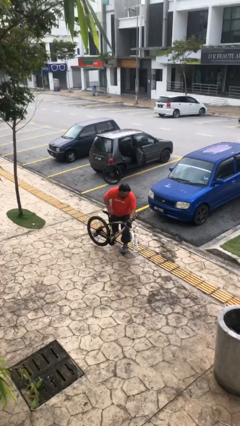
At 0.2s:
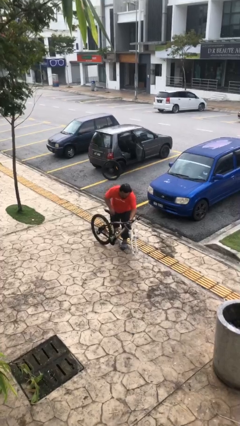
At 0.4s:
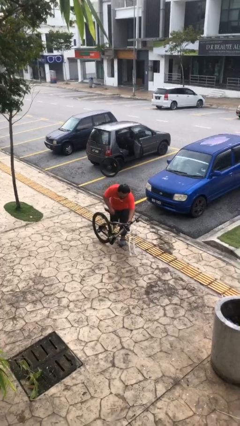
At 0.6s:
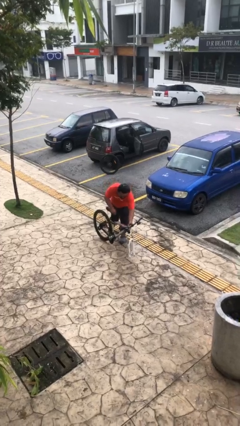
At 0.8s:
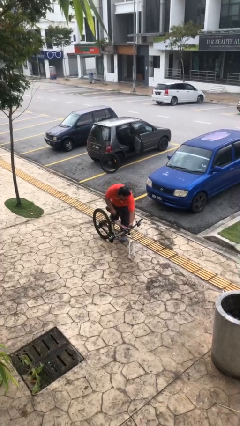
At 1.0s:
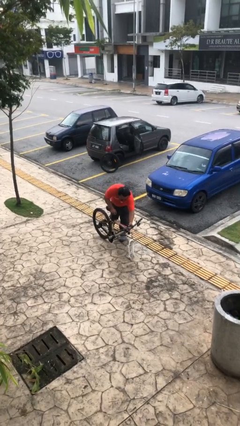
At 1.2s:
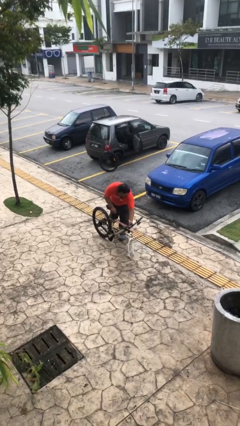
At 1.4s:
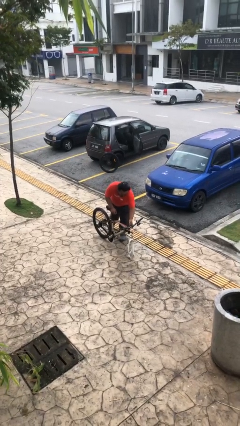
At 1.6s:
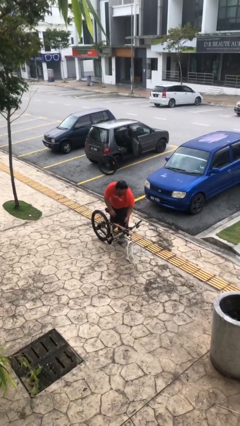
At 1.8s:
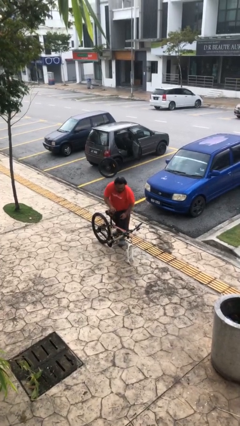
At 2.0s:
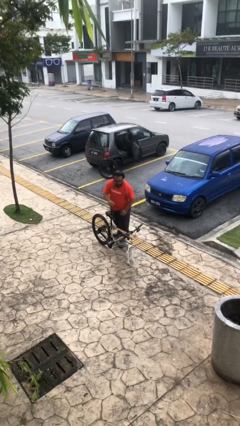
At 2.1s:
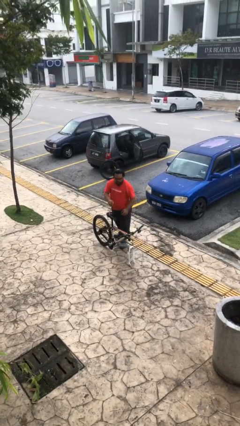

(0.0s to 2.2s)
person puts down object on floor

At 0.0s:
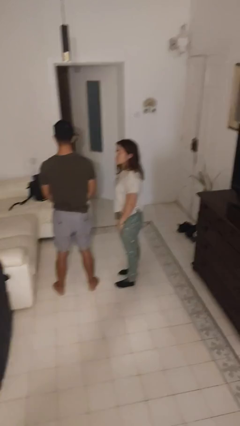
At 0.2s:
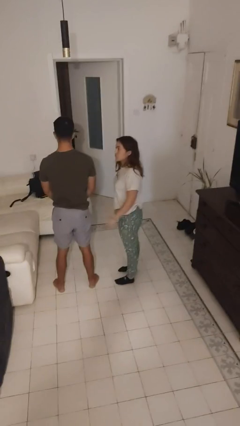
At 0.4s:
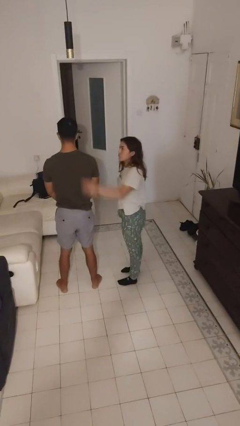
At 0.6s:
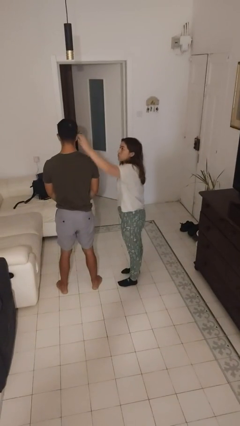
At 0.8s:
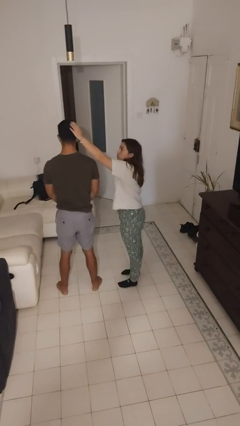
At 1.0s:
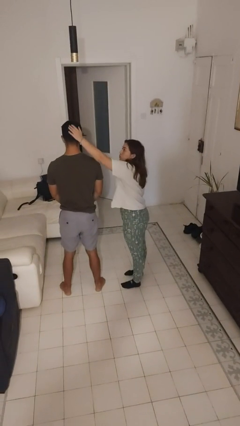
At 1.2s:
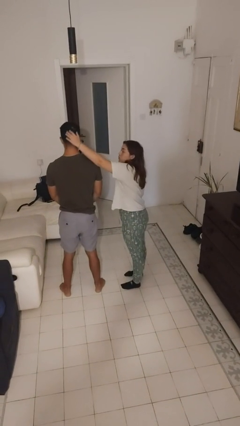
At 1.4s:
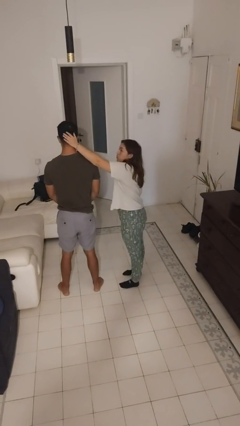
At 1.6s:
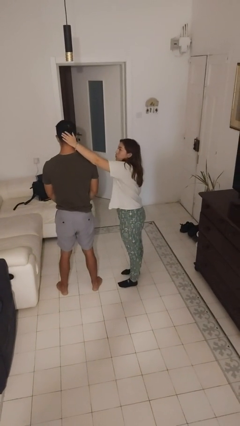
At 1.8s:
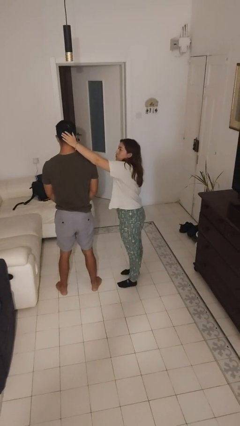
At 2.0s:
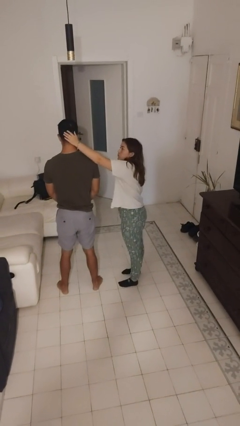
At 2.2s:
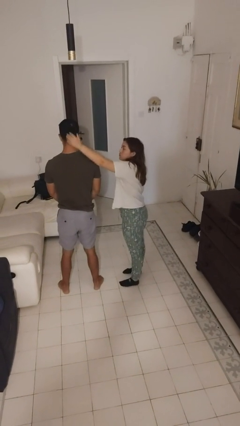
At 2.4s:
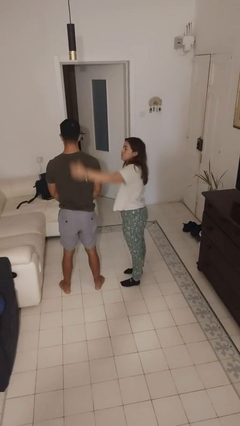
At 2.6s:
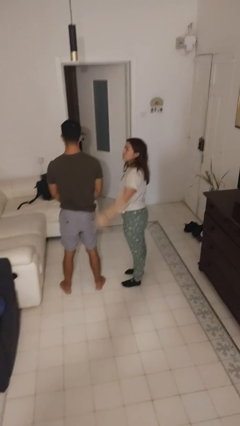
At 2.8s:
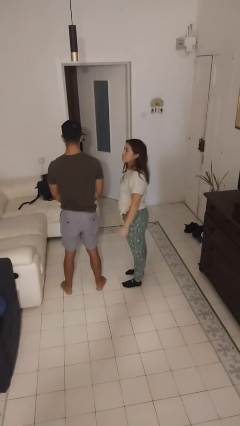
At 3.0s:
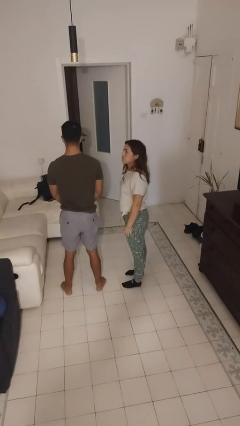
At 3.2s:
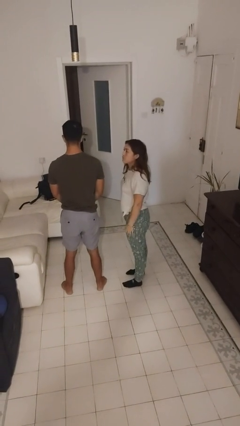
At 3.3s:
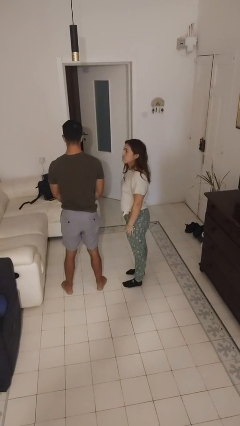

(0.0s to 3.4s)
person grabs person by hair

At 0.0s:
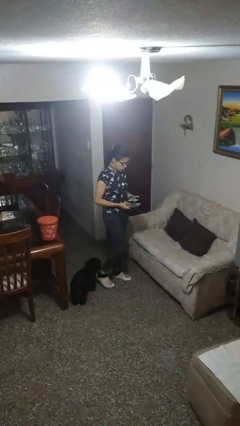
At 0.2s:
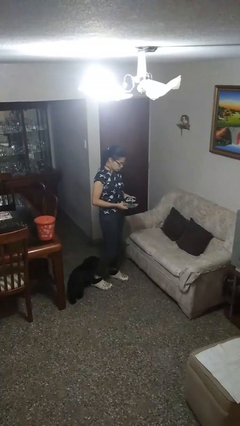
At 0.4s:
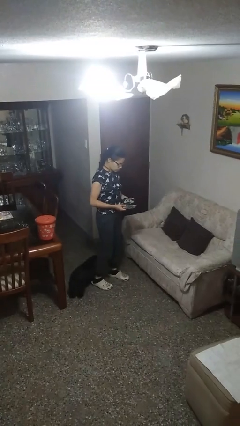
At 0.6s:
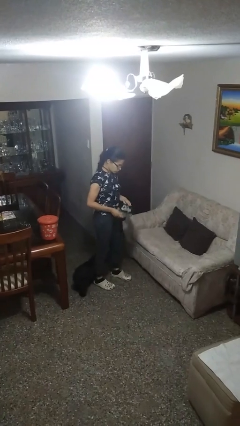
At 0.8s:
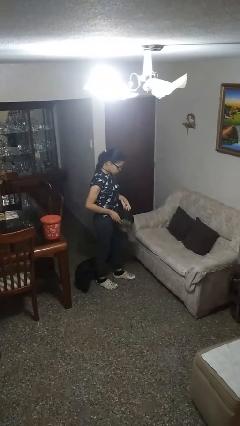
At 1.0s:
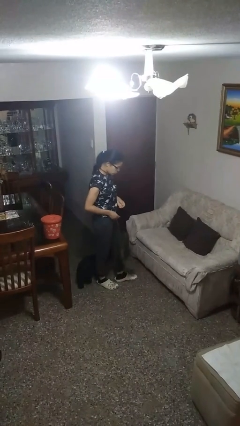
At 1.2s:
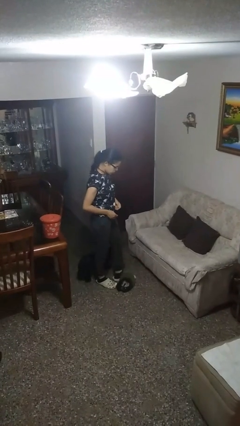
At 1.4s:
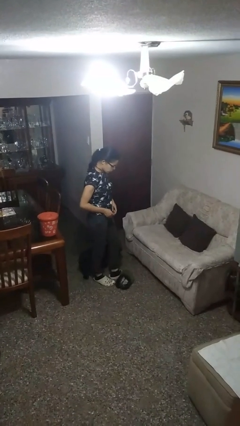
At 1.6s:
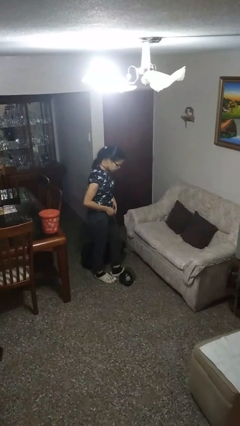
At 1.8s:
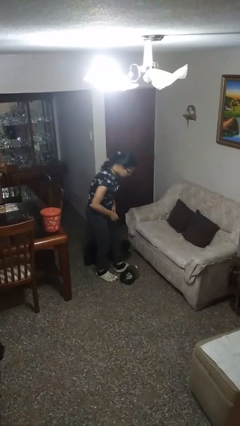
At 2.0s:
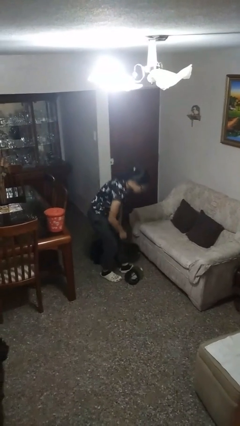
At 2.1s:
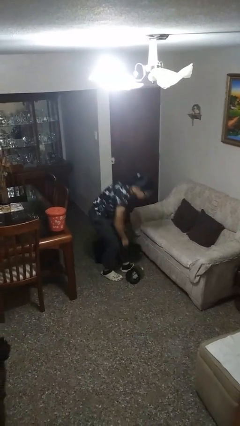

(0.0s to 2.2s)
person drops object

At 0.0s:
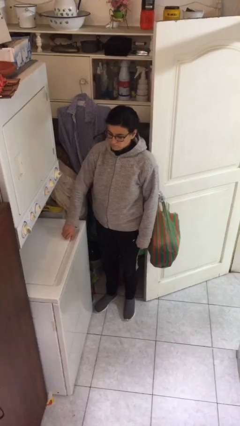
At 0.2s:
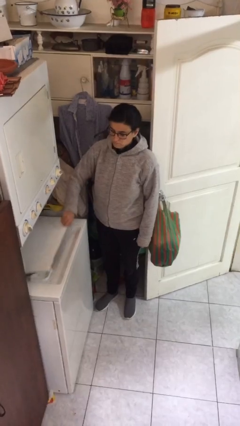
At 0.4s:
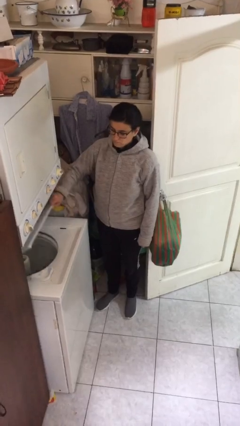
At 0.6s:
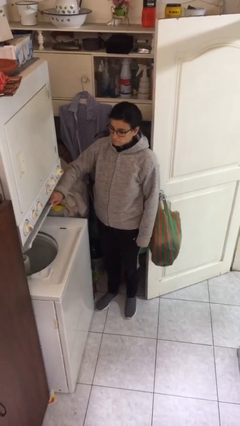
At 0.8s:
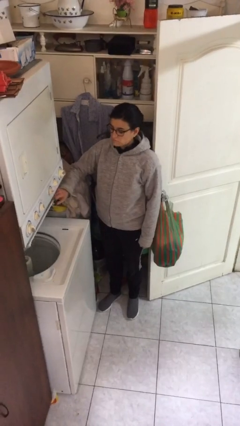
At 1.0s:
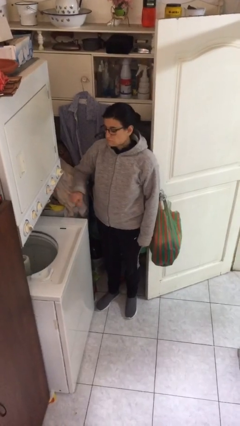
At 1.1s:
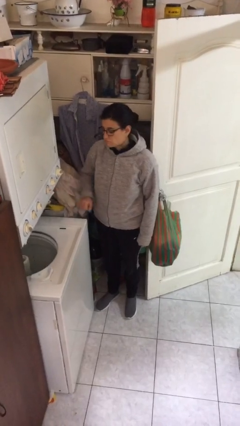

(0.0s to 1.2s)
person opens clothes washer

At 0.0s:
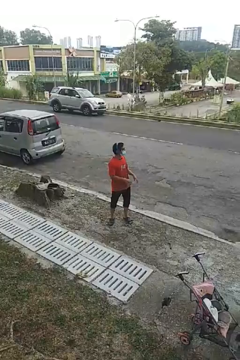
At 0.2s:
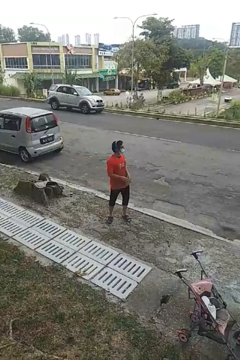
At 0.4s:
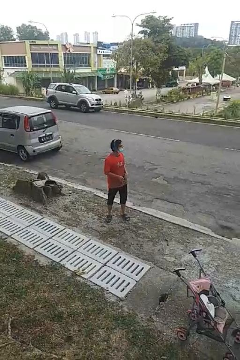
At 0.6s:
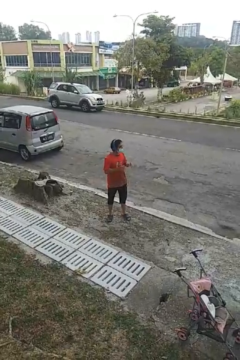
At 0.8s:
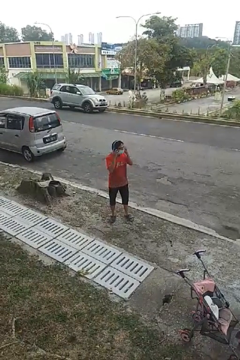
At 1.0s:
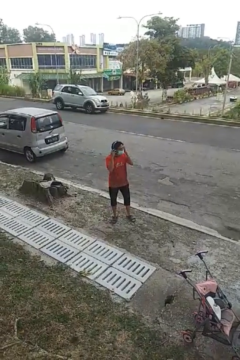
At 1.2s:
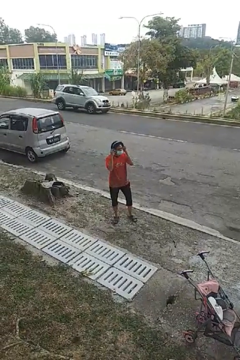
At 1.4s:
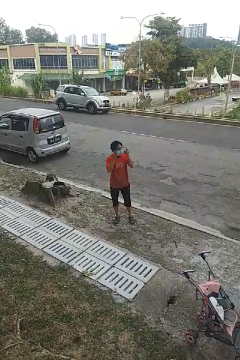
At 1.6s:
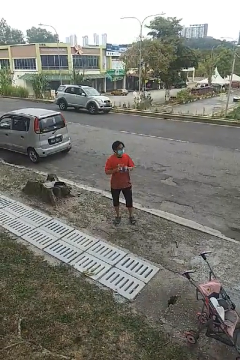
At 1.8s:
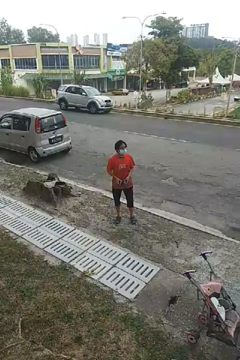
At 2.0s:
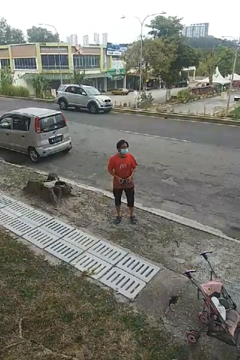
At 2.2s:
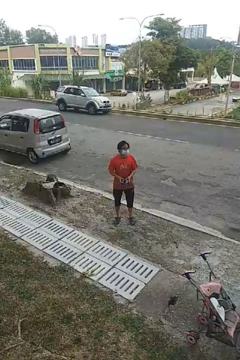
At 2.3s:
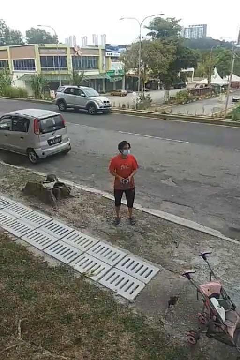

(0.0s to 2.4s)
person takes off headphones

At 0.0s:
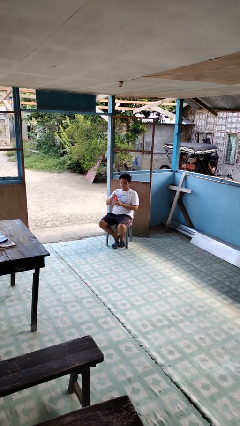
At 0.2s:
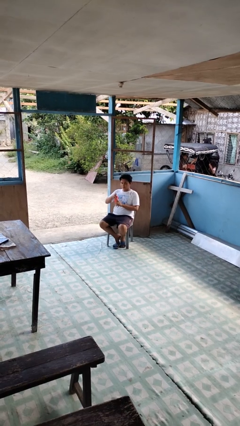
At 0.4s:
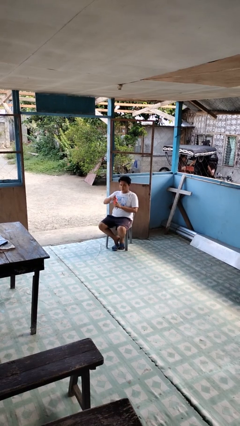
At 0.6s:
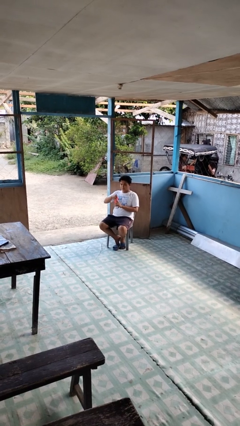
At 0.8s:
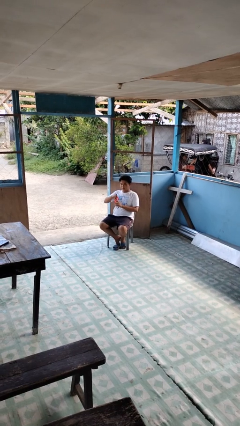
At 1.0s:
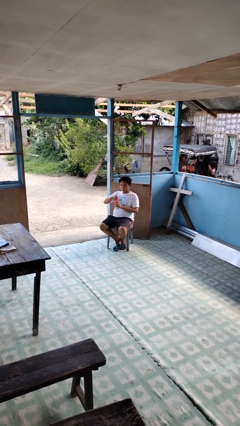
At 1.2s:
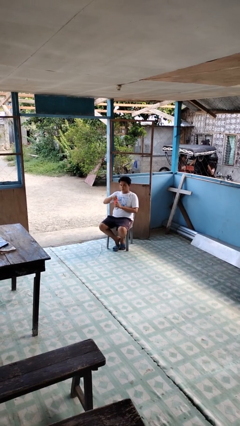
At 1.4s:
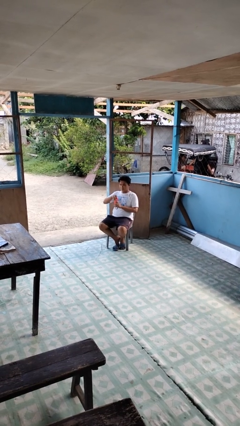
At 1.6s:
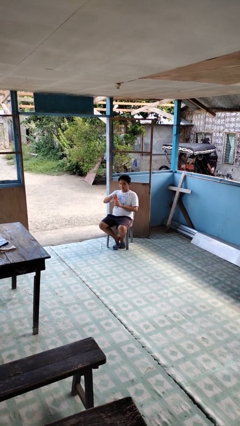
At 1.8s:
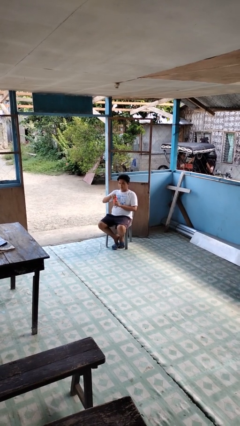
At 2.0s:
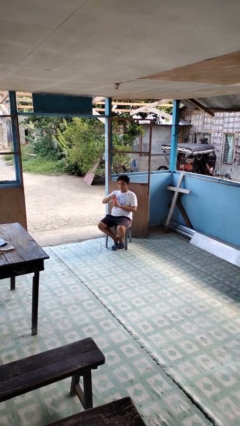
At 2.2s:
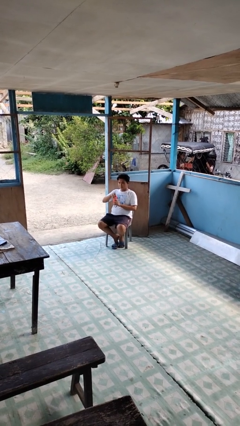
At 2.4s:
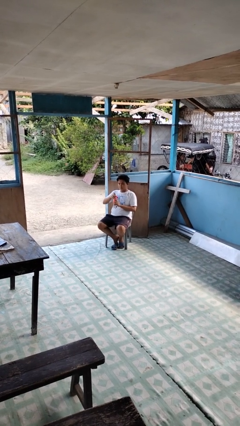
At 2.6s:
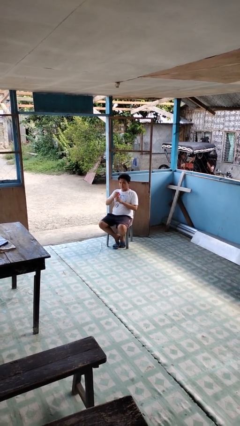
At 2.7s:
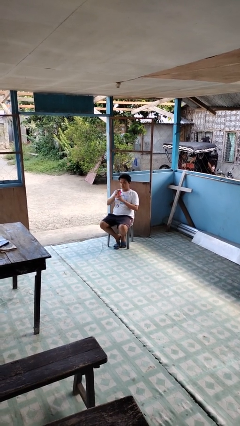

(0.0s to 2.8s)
person opens beverage can

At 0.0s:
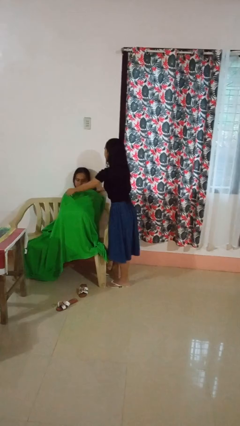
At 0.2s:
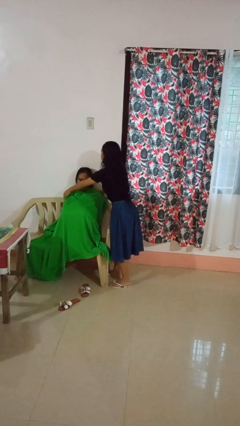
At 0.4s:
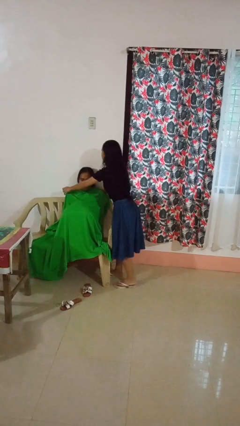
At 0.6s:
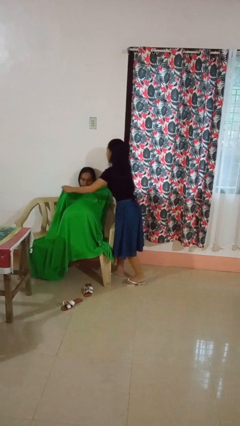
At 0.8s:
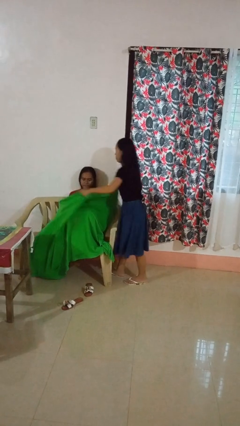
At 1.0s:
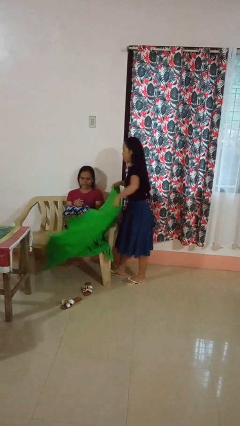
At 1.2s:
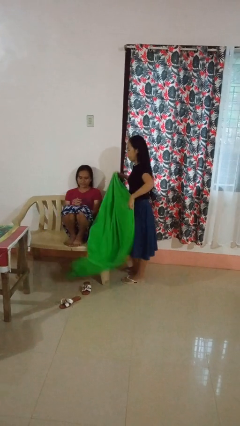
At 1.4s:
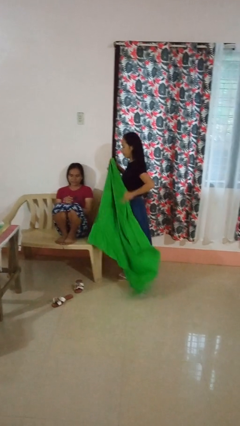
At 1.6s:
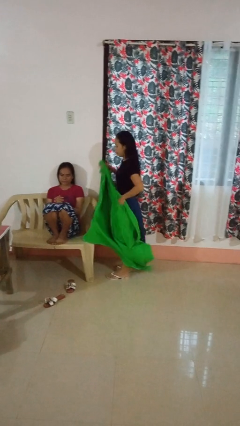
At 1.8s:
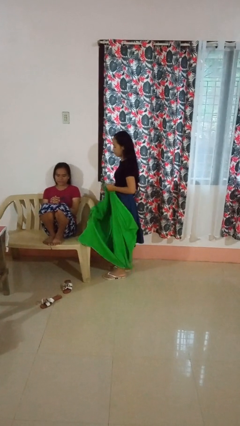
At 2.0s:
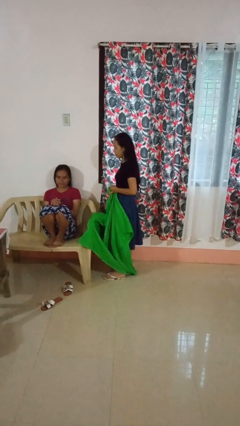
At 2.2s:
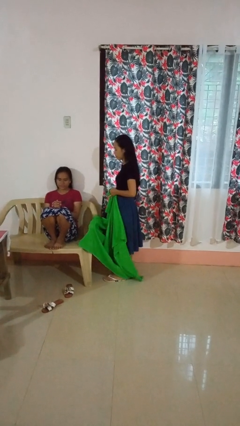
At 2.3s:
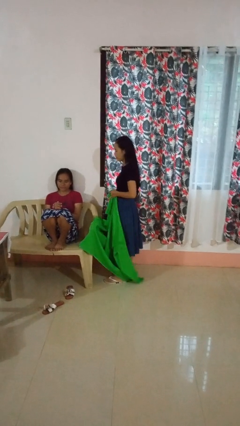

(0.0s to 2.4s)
person uncovers friend with blanket

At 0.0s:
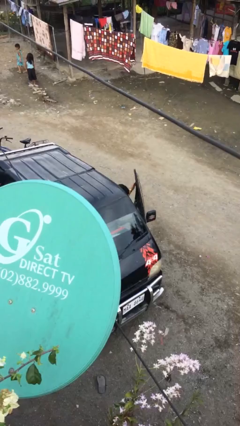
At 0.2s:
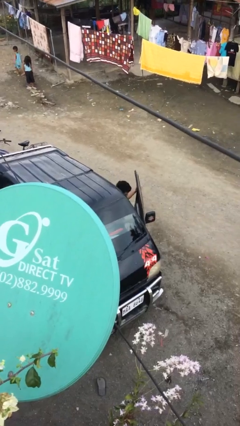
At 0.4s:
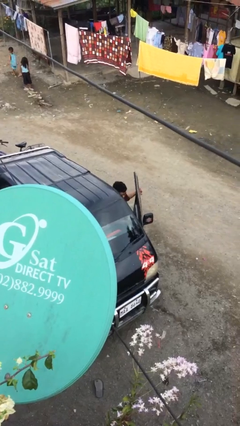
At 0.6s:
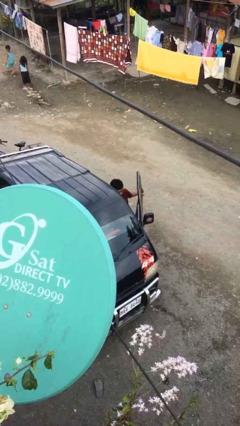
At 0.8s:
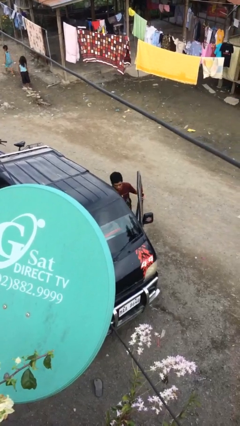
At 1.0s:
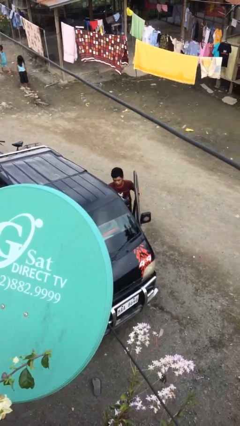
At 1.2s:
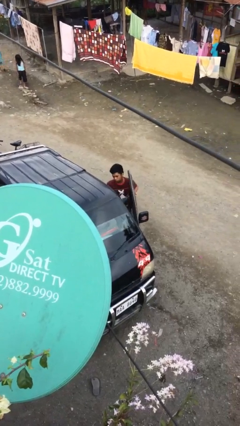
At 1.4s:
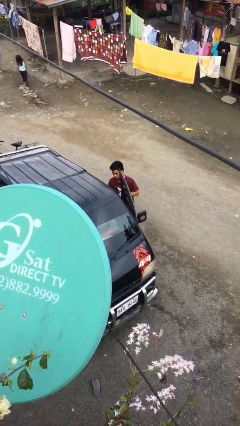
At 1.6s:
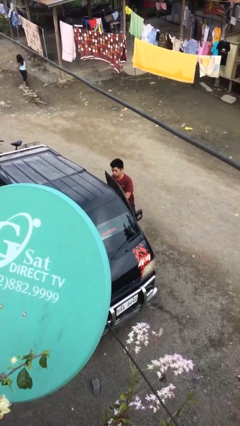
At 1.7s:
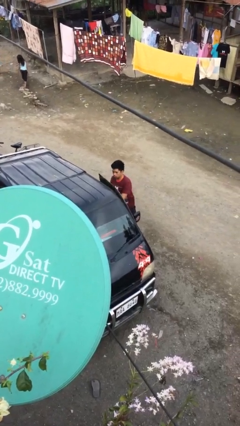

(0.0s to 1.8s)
person exits car
